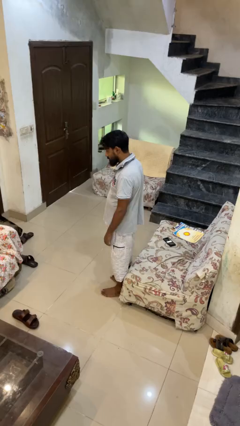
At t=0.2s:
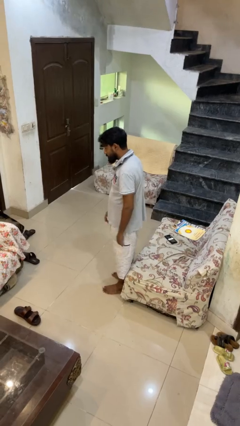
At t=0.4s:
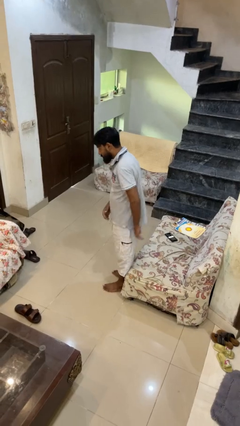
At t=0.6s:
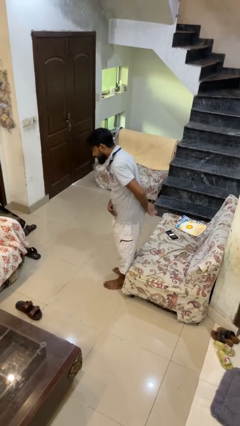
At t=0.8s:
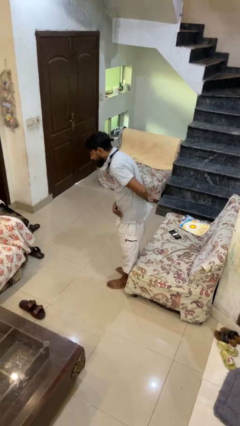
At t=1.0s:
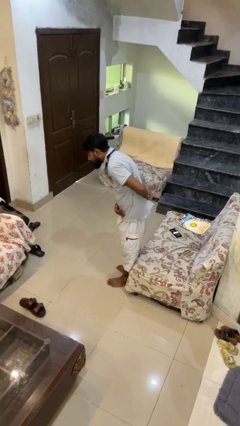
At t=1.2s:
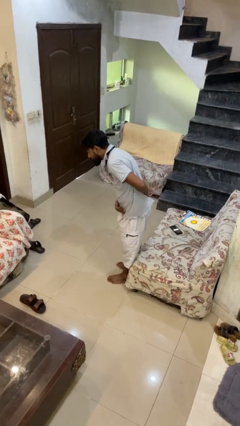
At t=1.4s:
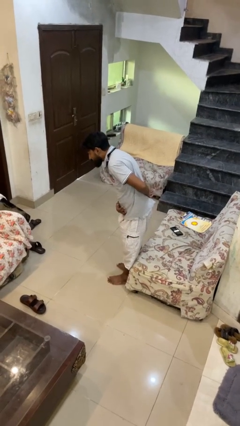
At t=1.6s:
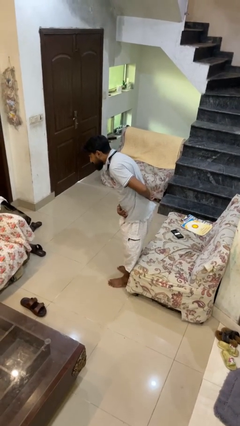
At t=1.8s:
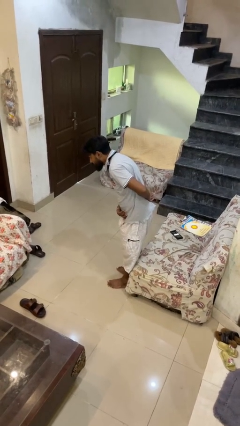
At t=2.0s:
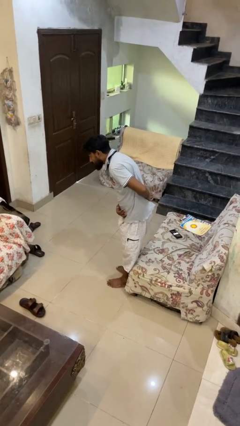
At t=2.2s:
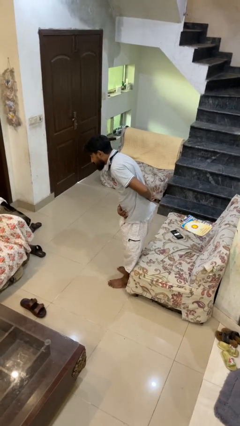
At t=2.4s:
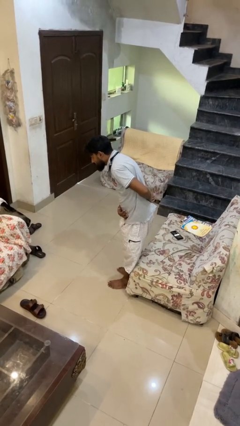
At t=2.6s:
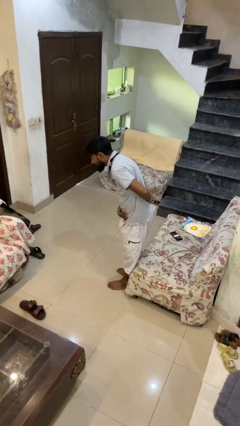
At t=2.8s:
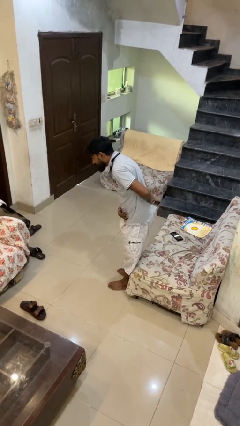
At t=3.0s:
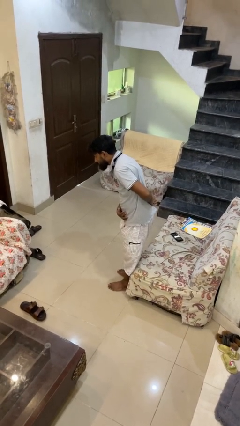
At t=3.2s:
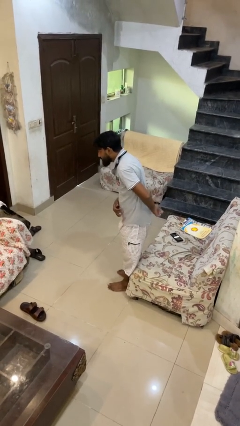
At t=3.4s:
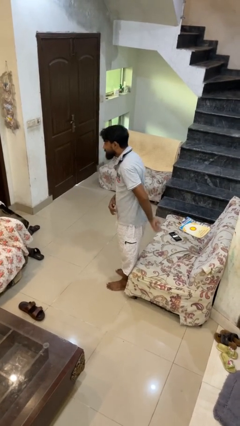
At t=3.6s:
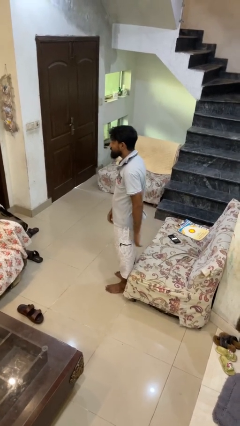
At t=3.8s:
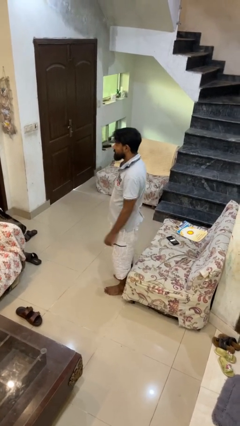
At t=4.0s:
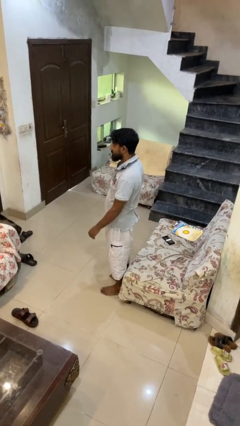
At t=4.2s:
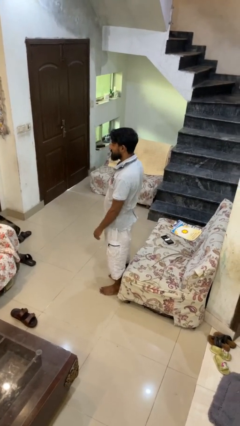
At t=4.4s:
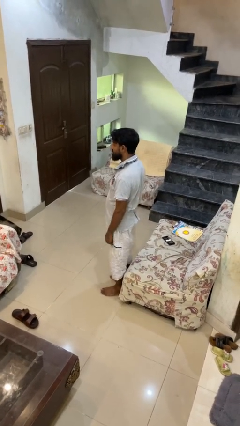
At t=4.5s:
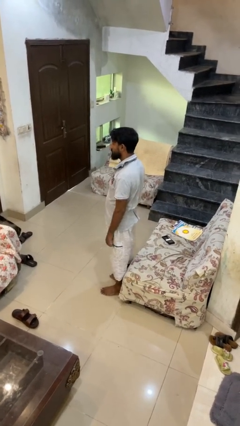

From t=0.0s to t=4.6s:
person bows

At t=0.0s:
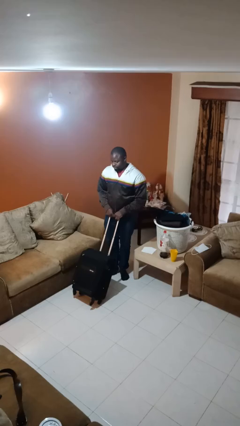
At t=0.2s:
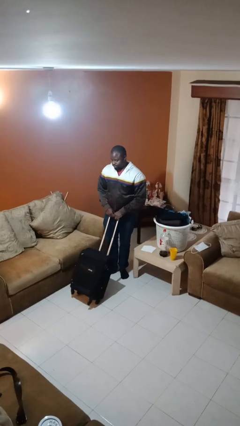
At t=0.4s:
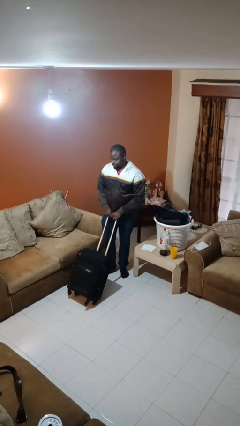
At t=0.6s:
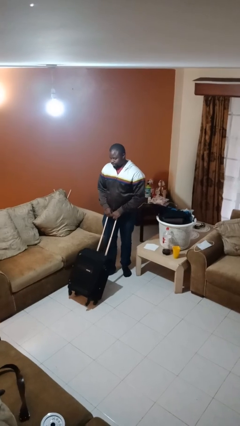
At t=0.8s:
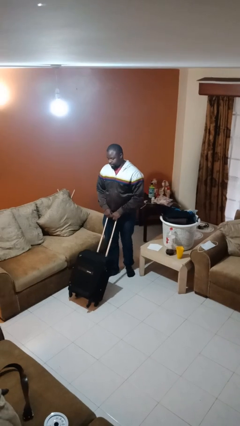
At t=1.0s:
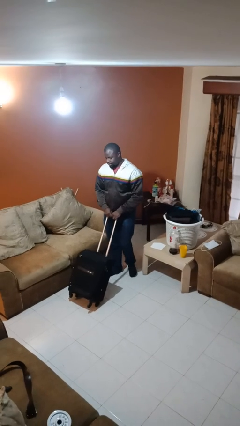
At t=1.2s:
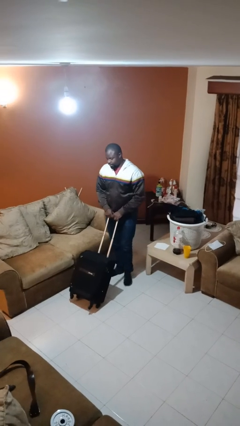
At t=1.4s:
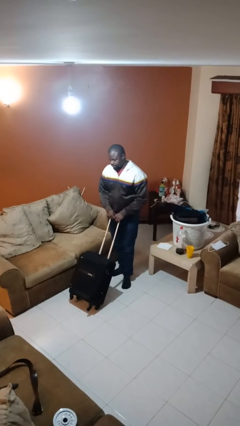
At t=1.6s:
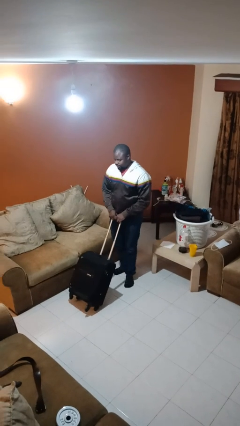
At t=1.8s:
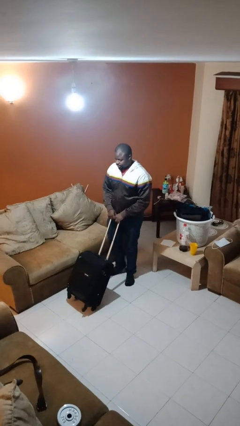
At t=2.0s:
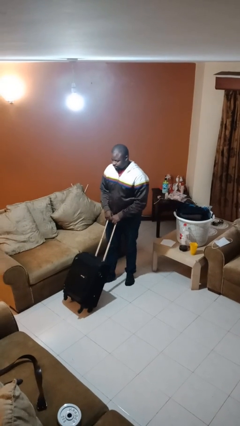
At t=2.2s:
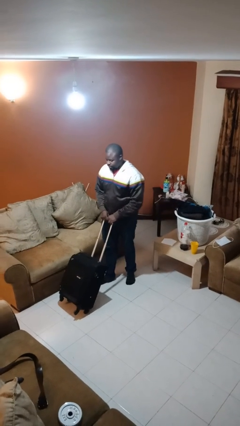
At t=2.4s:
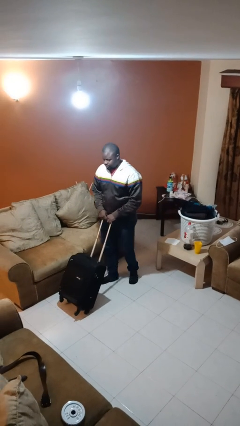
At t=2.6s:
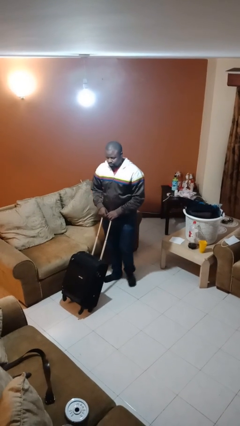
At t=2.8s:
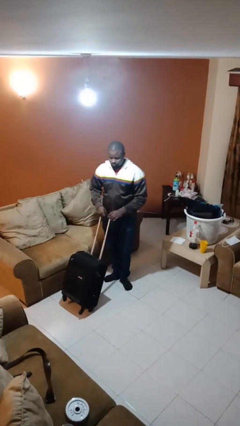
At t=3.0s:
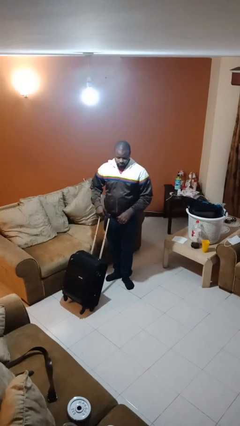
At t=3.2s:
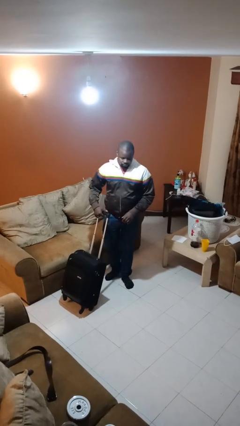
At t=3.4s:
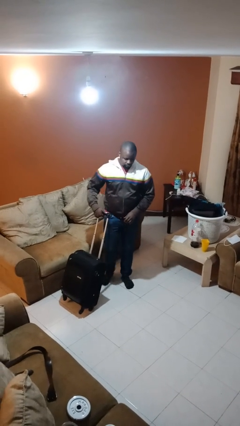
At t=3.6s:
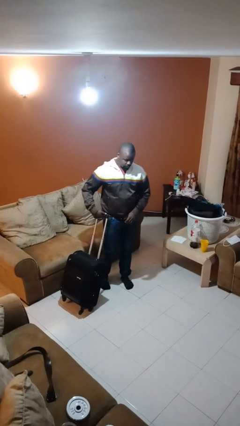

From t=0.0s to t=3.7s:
person pushes wheeled cart

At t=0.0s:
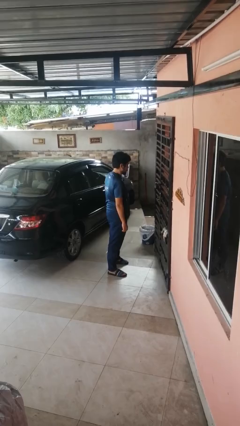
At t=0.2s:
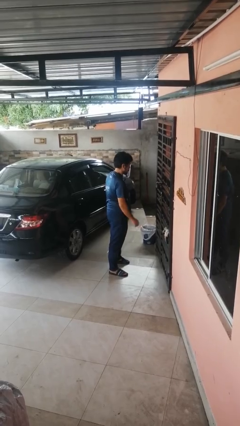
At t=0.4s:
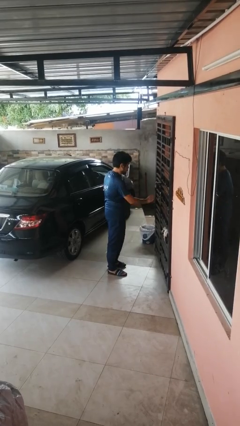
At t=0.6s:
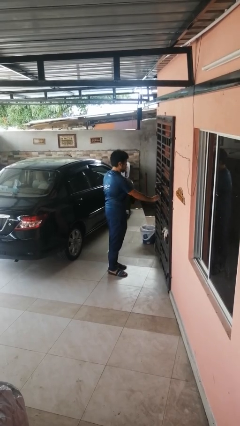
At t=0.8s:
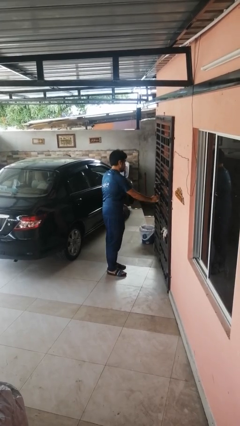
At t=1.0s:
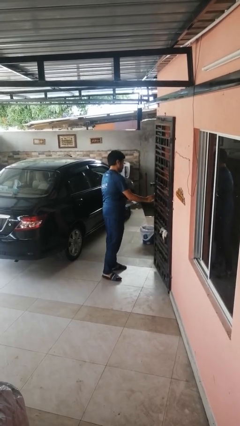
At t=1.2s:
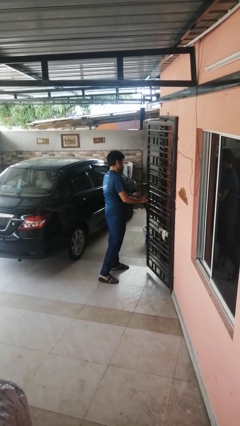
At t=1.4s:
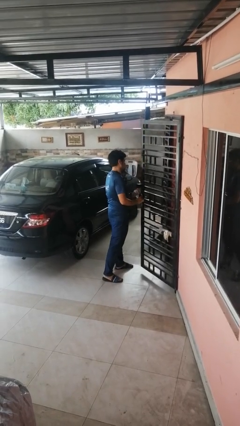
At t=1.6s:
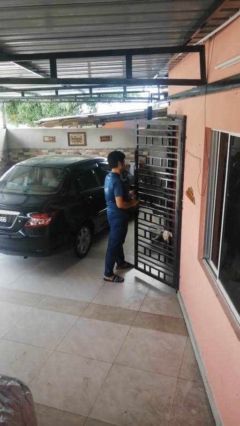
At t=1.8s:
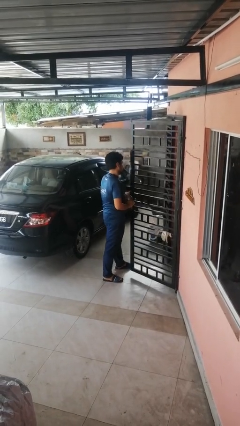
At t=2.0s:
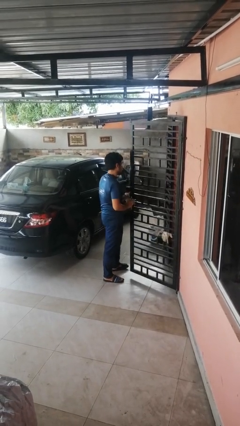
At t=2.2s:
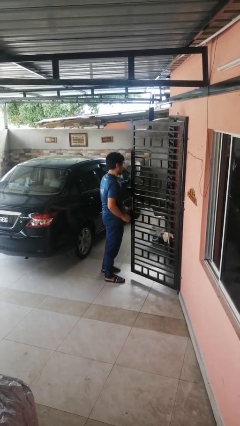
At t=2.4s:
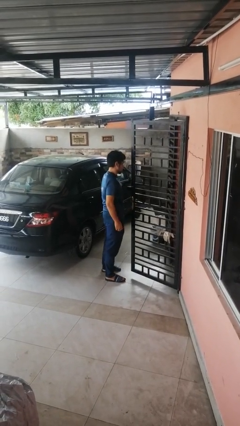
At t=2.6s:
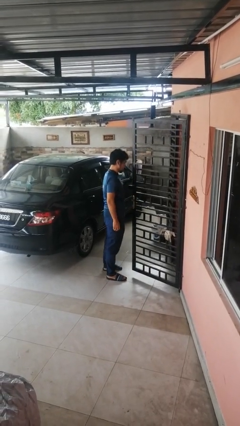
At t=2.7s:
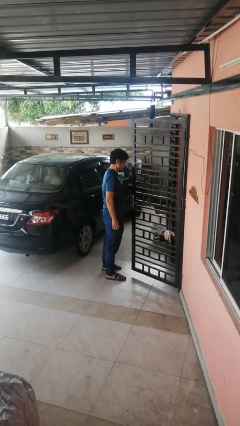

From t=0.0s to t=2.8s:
person opens gate

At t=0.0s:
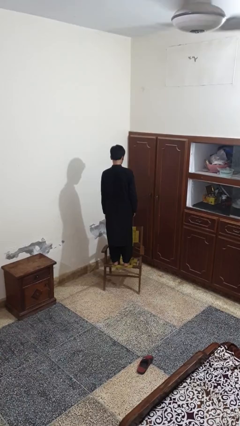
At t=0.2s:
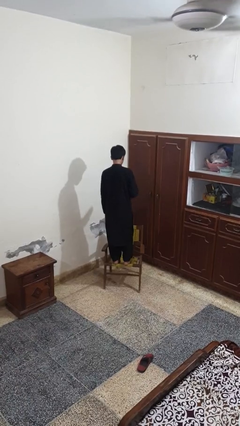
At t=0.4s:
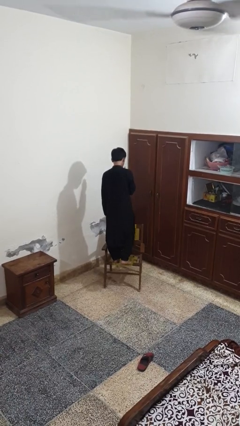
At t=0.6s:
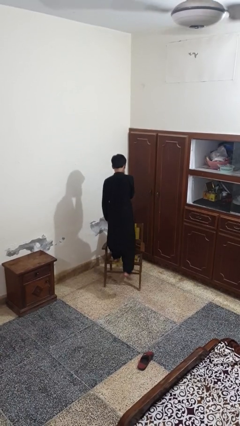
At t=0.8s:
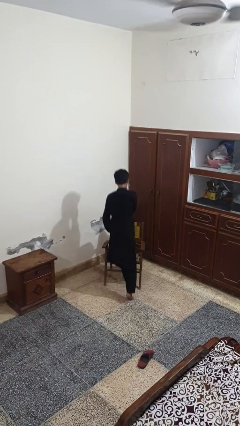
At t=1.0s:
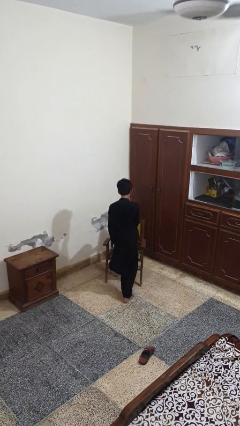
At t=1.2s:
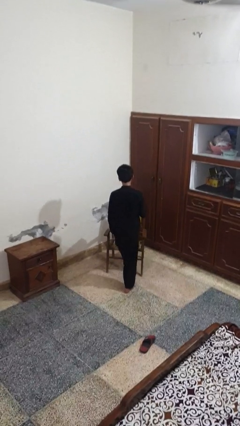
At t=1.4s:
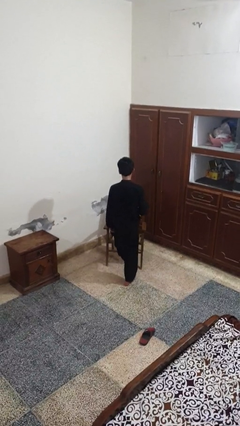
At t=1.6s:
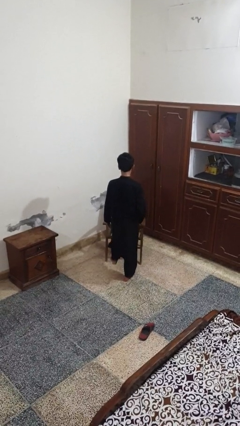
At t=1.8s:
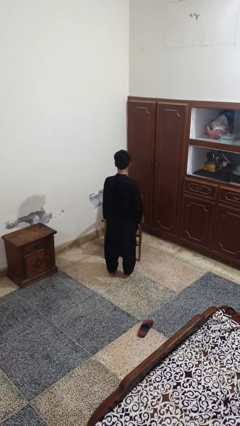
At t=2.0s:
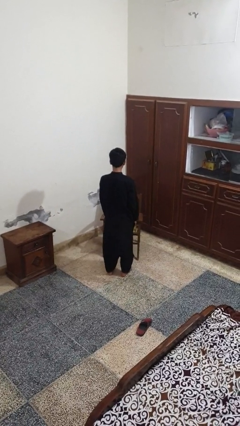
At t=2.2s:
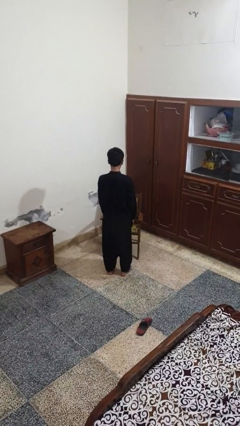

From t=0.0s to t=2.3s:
person climbs off chair

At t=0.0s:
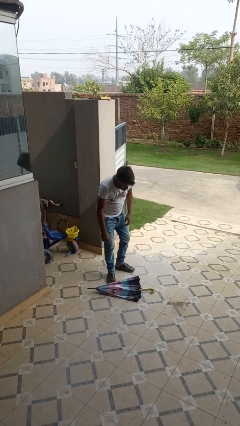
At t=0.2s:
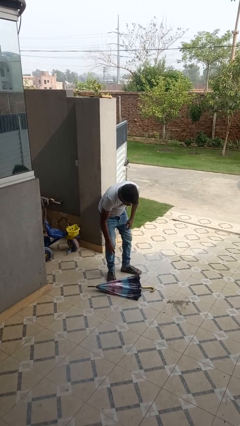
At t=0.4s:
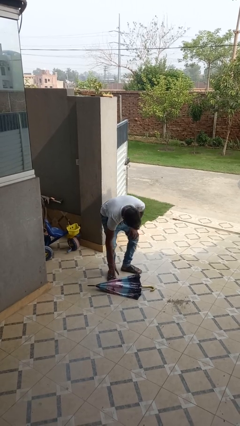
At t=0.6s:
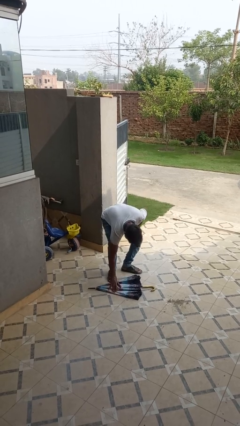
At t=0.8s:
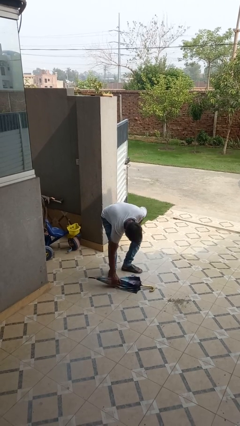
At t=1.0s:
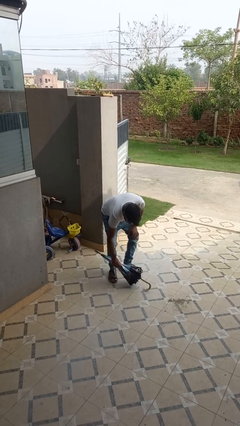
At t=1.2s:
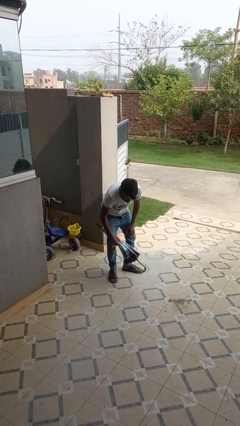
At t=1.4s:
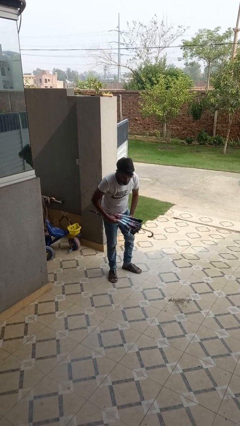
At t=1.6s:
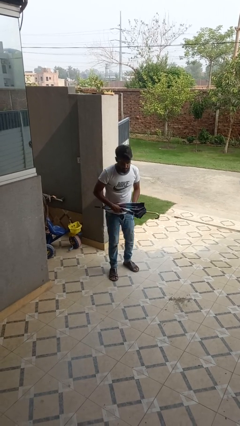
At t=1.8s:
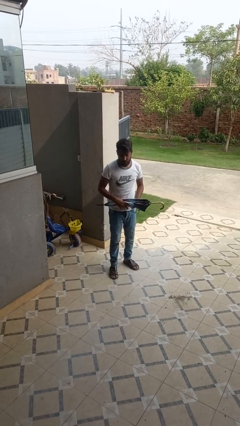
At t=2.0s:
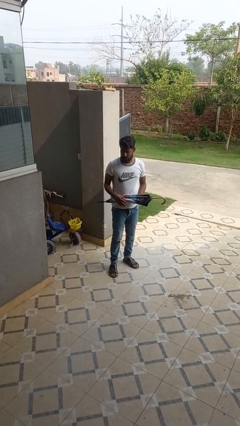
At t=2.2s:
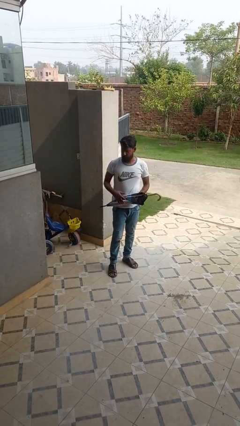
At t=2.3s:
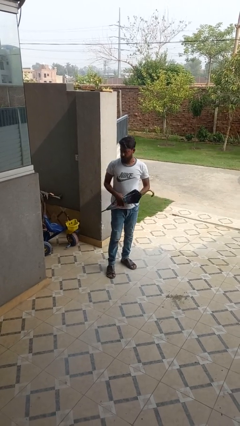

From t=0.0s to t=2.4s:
person picks up object from floor

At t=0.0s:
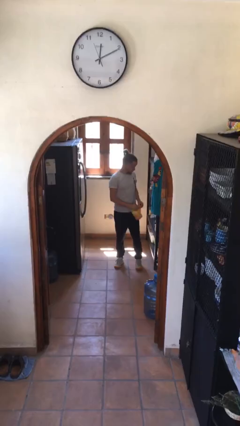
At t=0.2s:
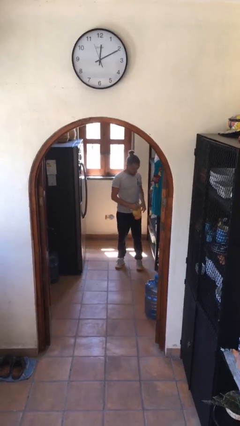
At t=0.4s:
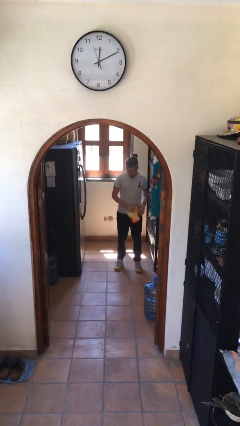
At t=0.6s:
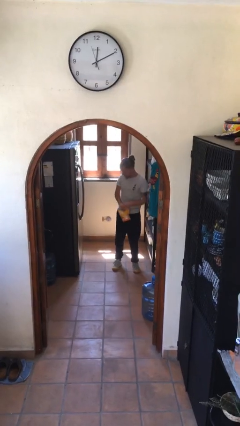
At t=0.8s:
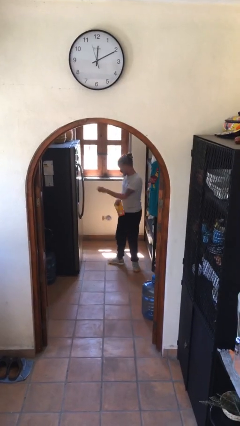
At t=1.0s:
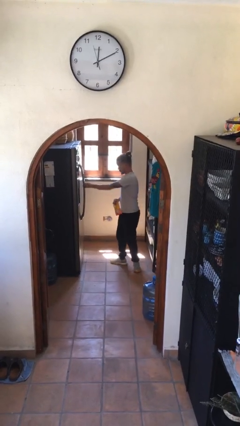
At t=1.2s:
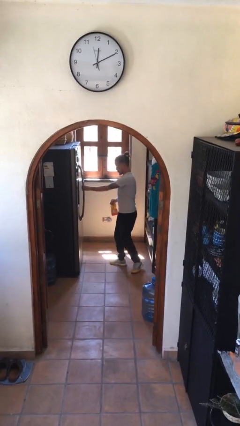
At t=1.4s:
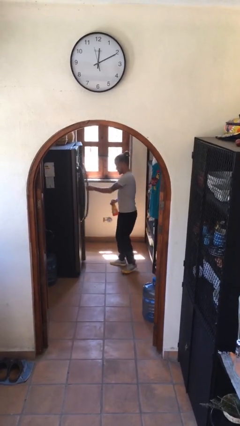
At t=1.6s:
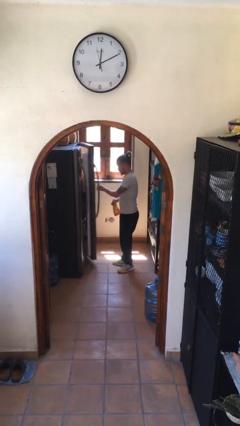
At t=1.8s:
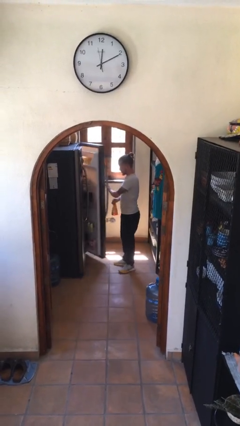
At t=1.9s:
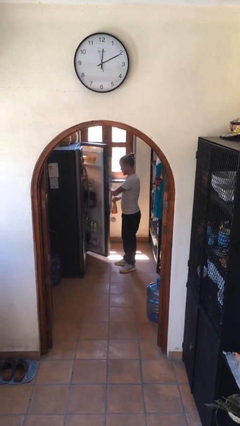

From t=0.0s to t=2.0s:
person opens refrigerator
